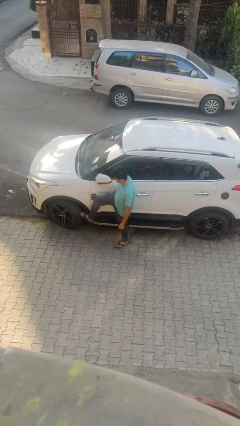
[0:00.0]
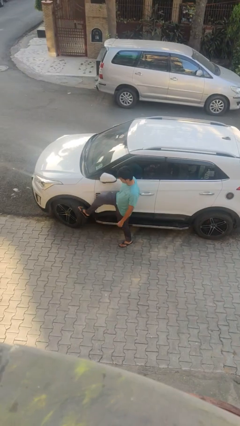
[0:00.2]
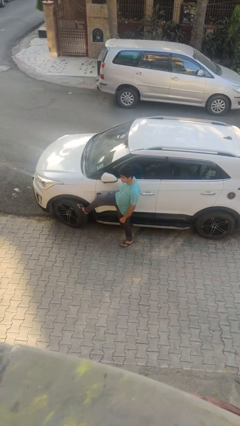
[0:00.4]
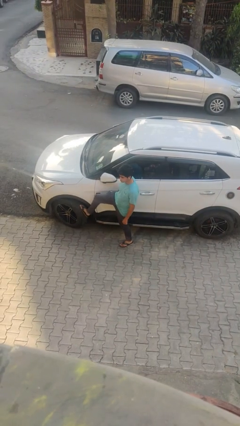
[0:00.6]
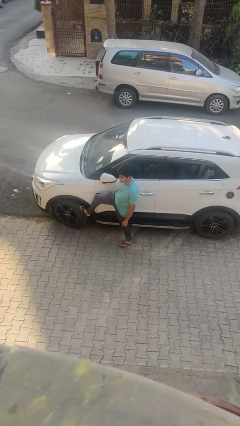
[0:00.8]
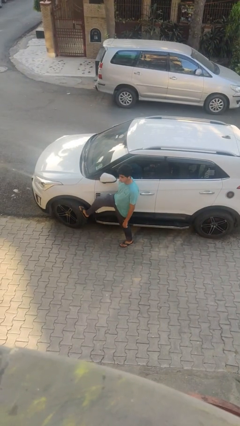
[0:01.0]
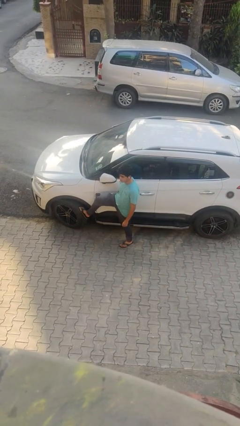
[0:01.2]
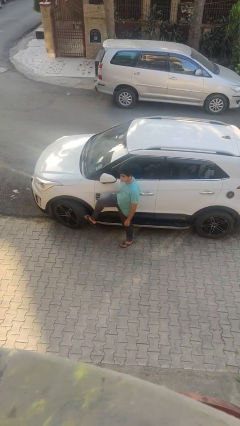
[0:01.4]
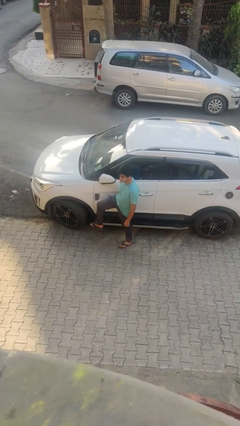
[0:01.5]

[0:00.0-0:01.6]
person kicks car tires

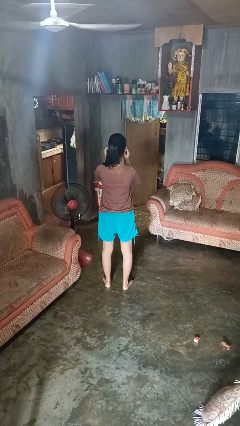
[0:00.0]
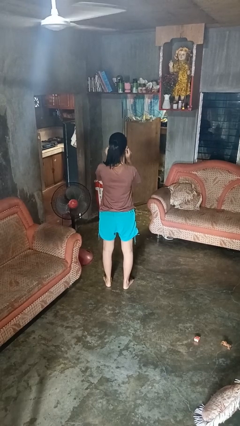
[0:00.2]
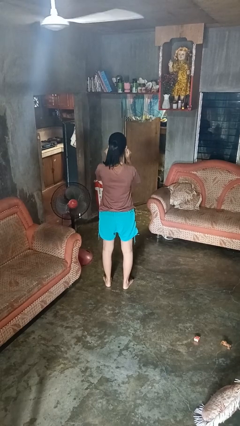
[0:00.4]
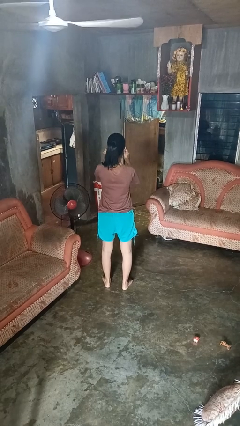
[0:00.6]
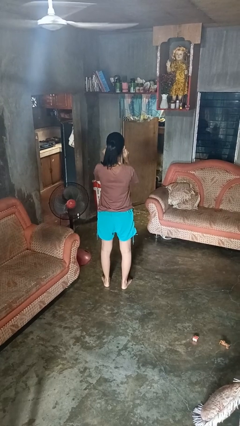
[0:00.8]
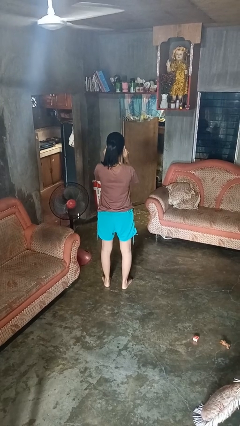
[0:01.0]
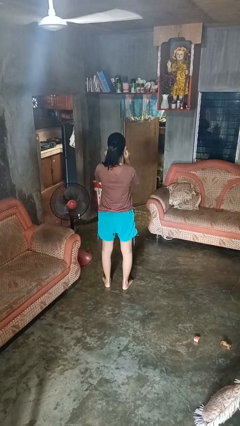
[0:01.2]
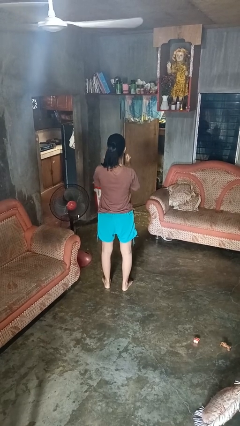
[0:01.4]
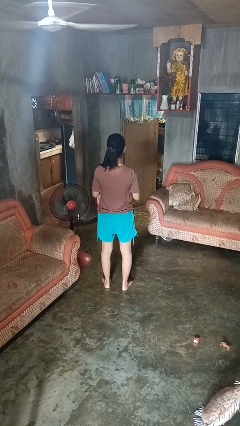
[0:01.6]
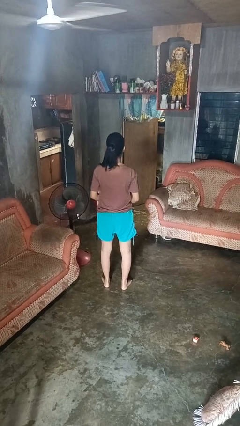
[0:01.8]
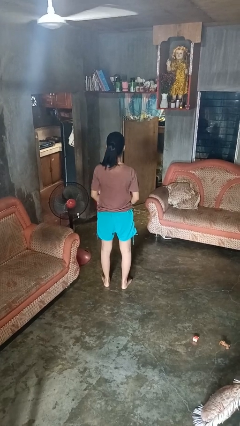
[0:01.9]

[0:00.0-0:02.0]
person touches earlobe

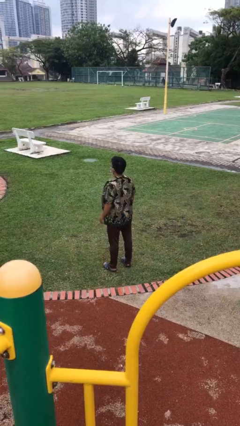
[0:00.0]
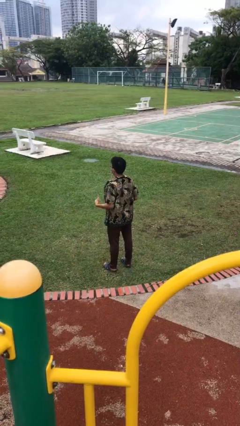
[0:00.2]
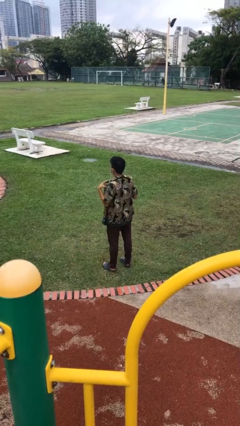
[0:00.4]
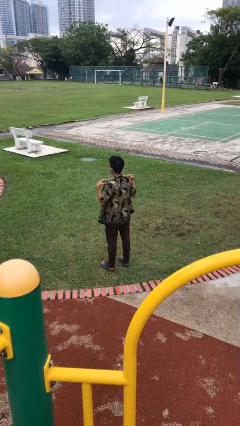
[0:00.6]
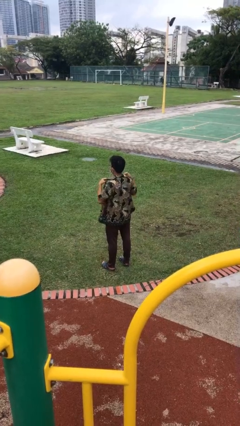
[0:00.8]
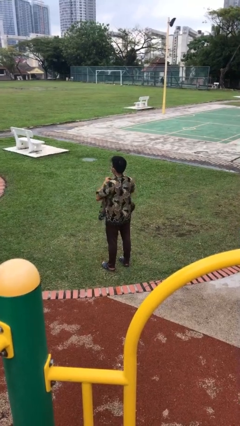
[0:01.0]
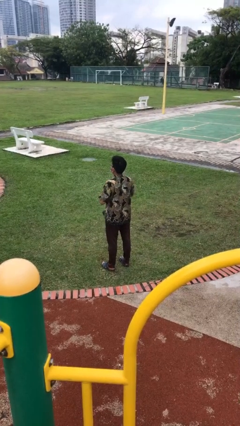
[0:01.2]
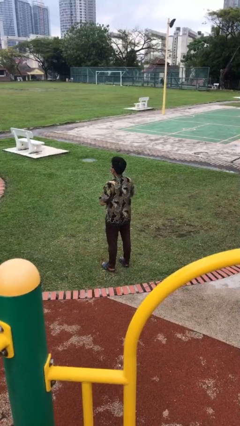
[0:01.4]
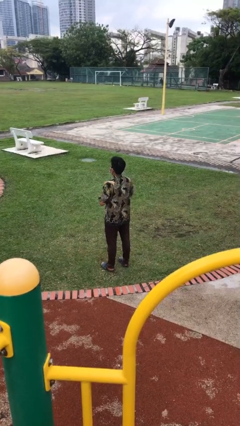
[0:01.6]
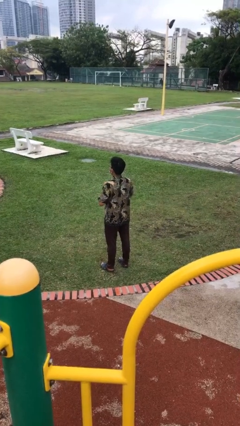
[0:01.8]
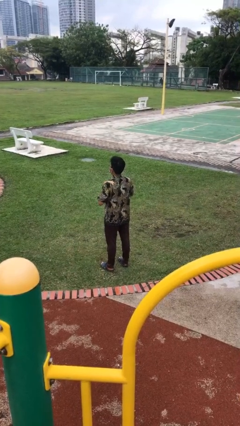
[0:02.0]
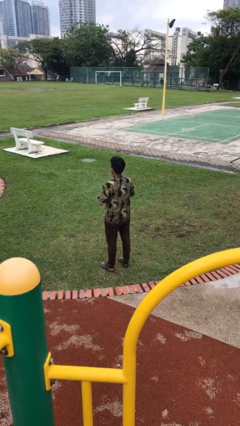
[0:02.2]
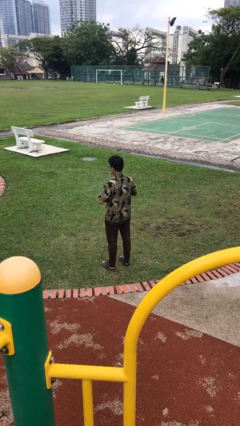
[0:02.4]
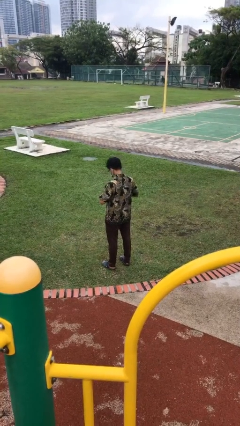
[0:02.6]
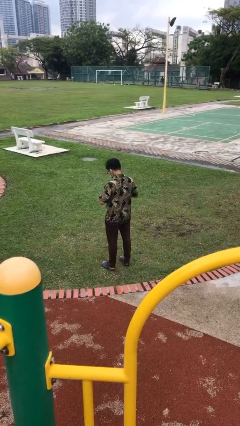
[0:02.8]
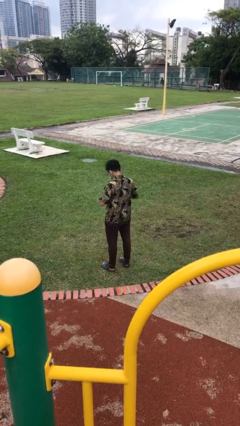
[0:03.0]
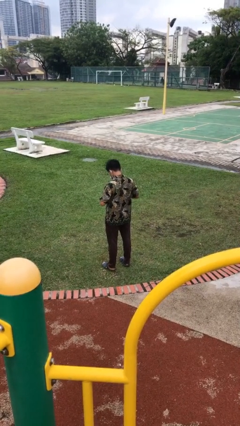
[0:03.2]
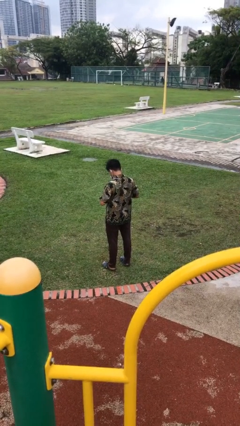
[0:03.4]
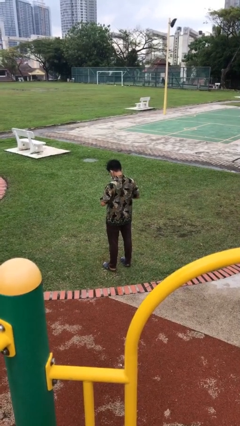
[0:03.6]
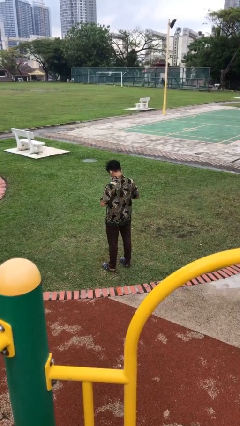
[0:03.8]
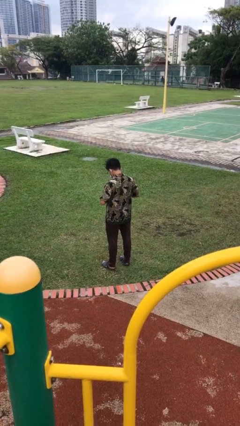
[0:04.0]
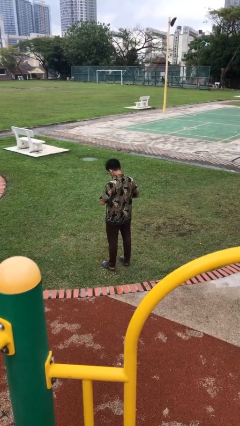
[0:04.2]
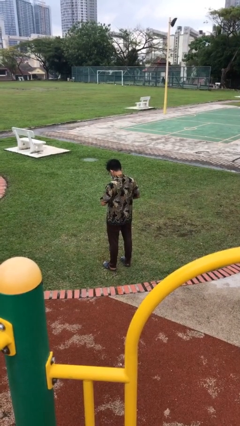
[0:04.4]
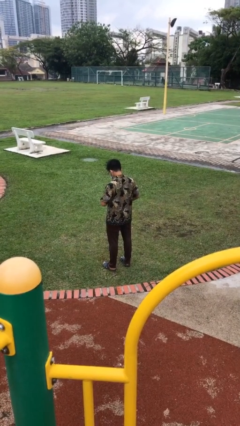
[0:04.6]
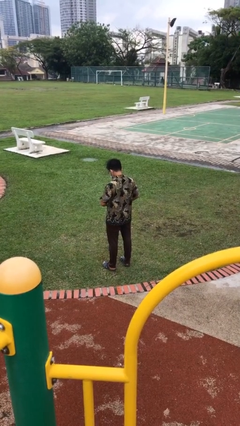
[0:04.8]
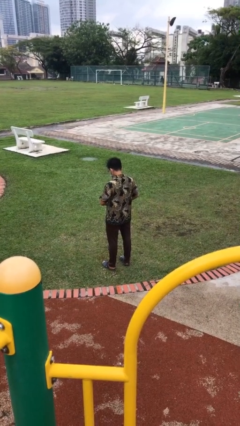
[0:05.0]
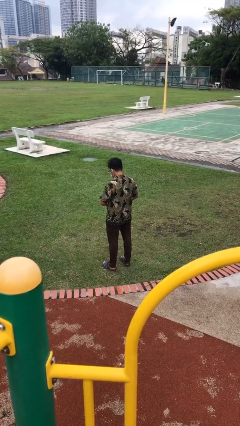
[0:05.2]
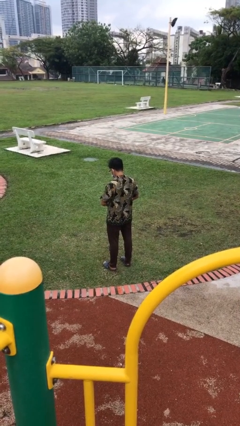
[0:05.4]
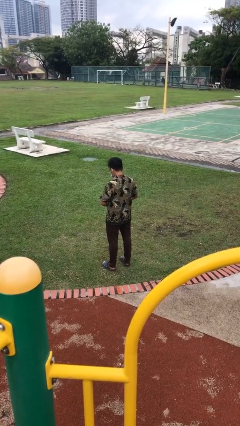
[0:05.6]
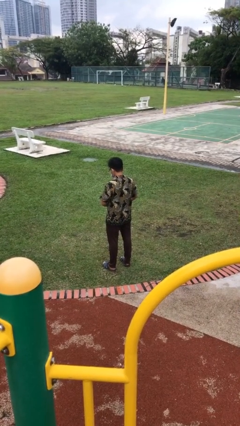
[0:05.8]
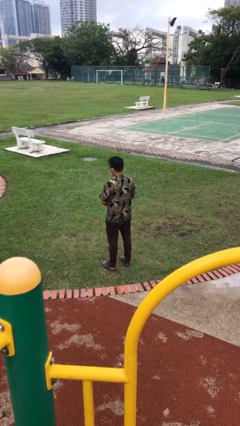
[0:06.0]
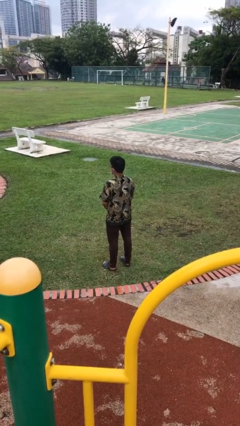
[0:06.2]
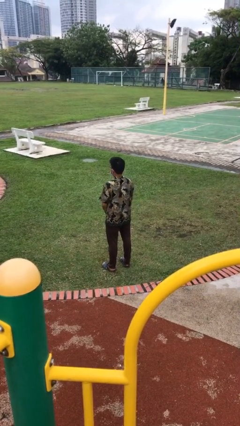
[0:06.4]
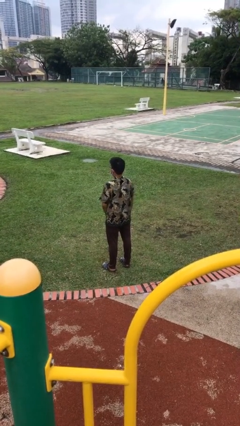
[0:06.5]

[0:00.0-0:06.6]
person buttons shirt

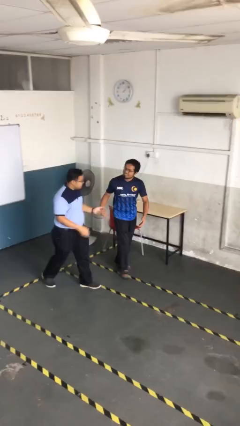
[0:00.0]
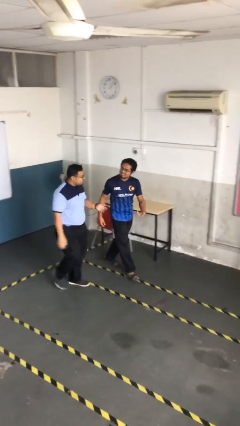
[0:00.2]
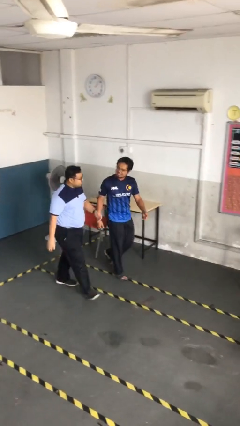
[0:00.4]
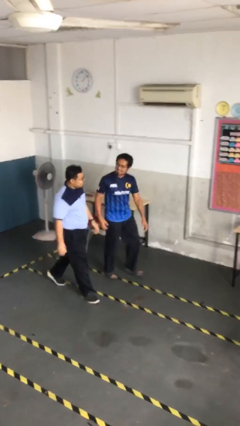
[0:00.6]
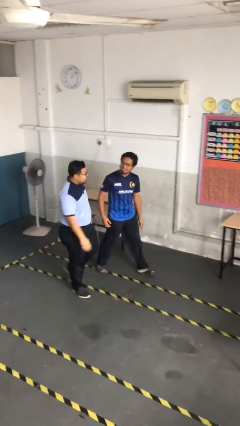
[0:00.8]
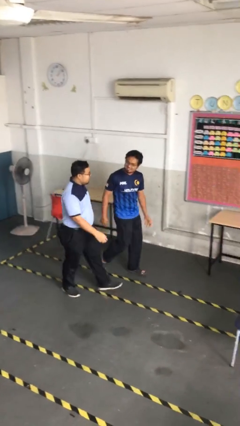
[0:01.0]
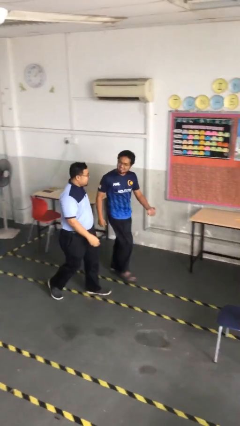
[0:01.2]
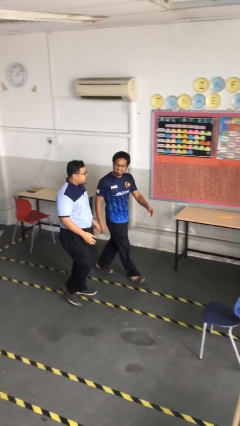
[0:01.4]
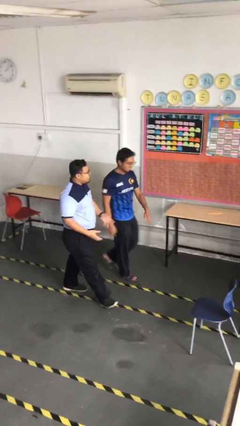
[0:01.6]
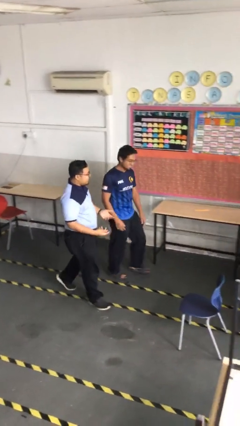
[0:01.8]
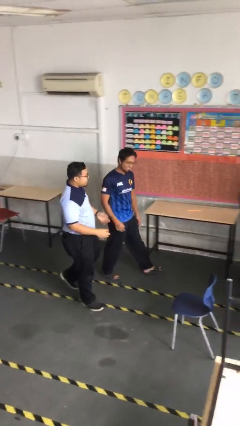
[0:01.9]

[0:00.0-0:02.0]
person talks to person

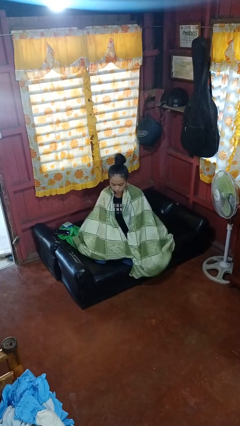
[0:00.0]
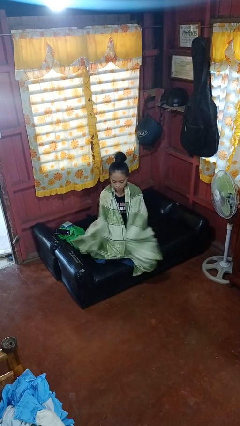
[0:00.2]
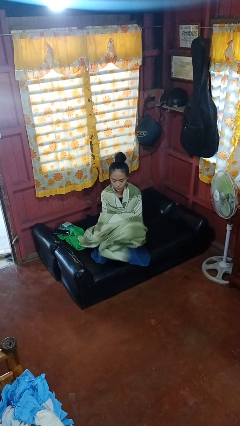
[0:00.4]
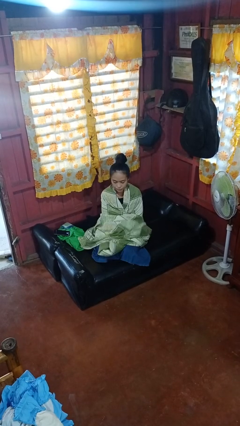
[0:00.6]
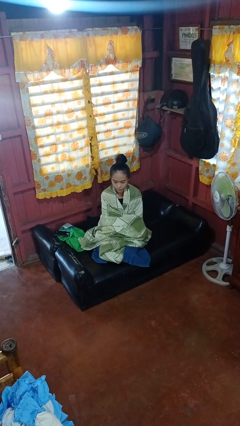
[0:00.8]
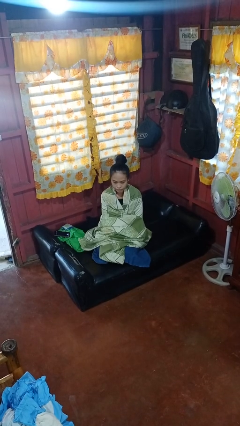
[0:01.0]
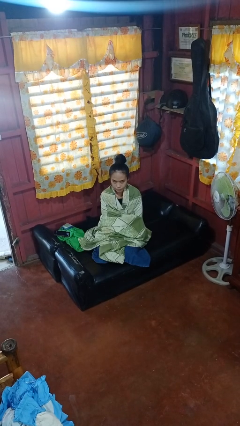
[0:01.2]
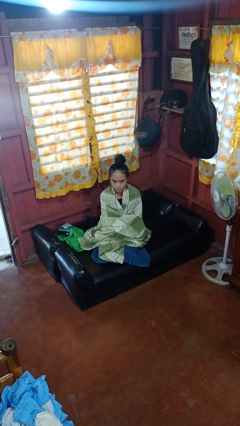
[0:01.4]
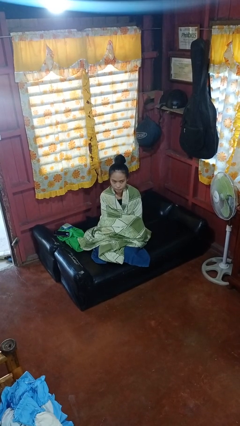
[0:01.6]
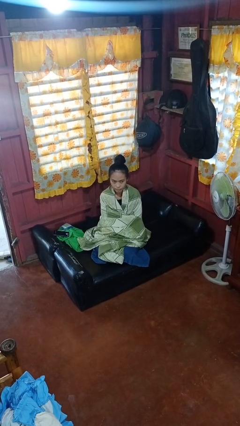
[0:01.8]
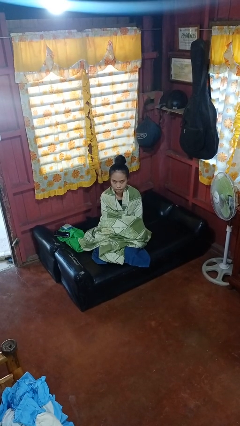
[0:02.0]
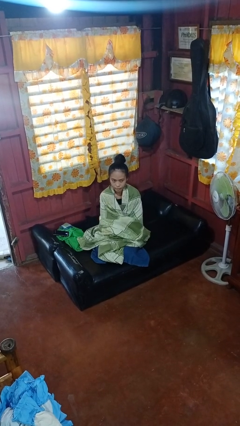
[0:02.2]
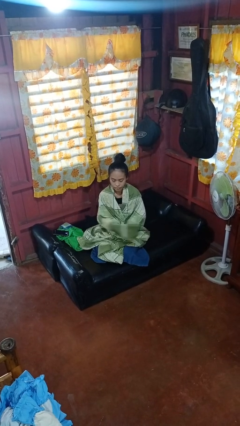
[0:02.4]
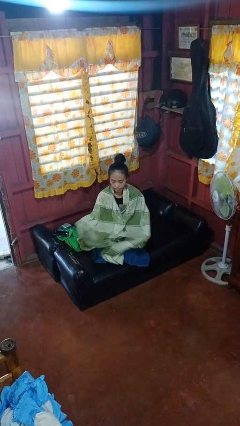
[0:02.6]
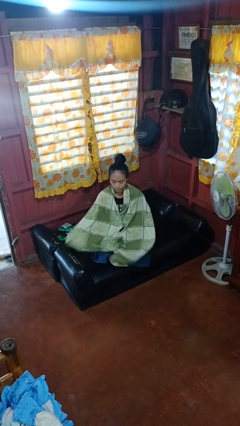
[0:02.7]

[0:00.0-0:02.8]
person covers with blanket

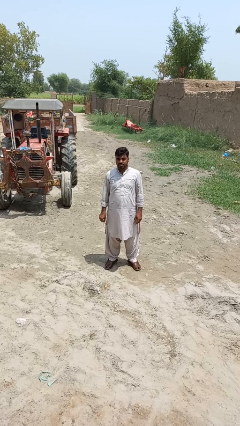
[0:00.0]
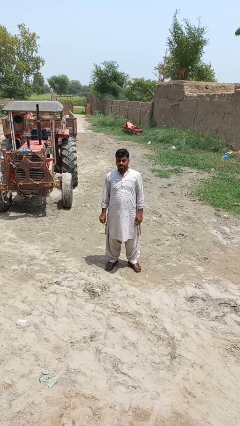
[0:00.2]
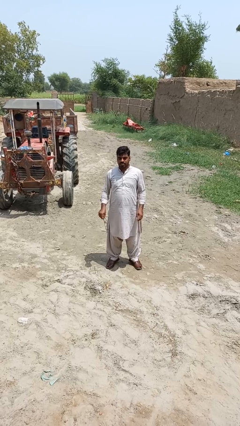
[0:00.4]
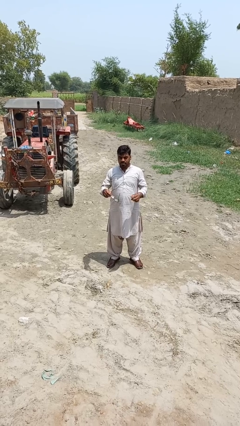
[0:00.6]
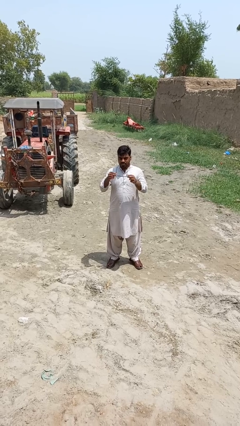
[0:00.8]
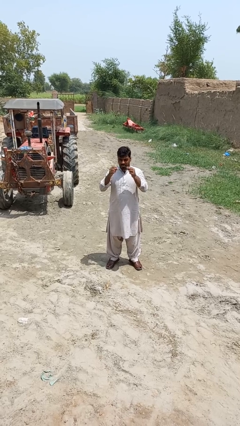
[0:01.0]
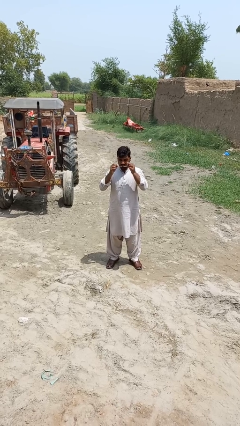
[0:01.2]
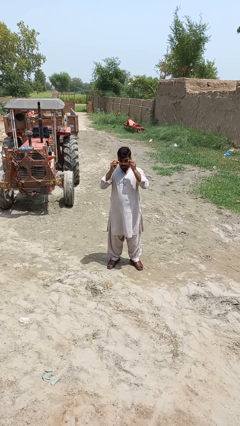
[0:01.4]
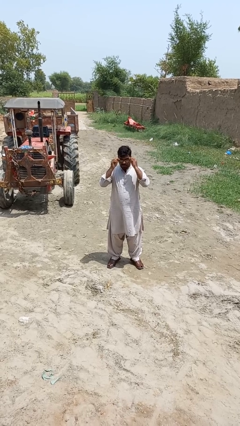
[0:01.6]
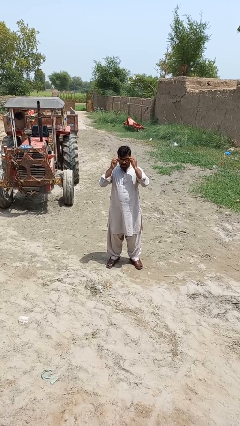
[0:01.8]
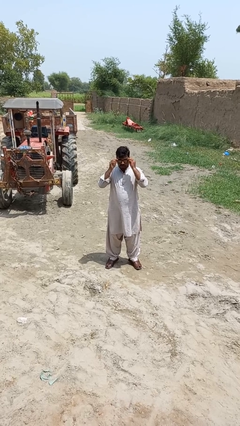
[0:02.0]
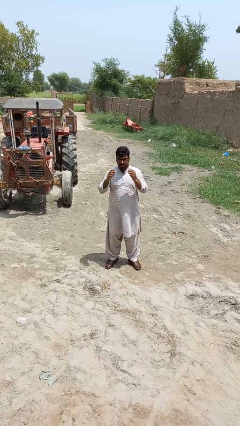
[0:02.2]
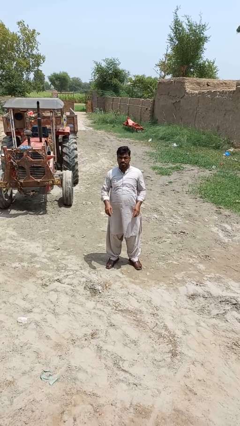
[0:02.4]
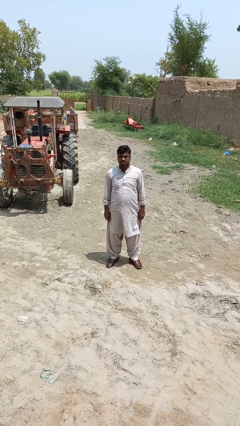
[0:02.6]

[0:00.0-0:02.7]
person puts on glasses
